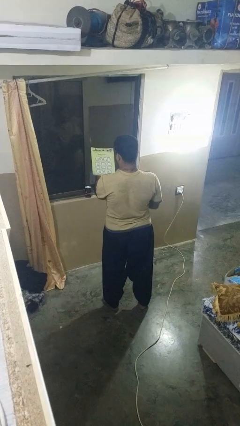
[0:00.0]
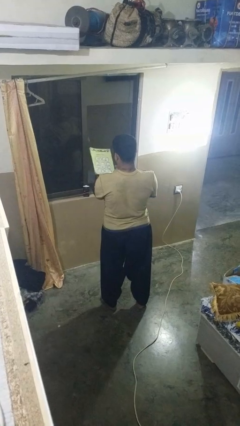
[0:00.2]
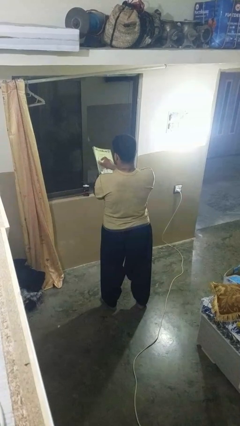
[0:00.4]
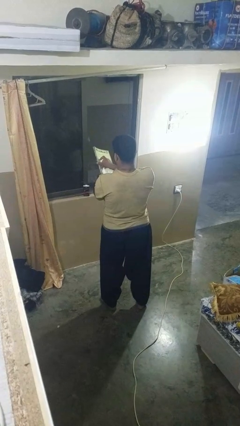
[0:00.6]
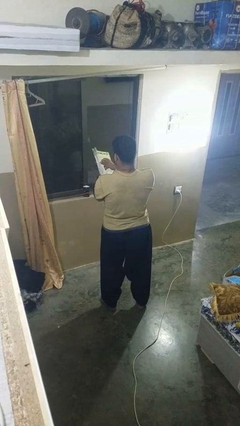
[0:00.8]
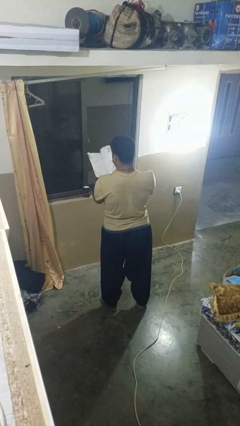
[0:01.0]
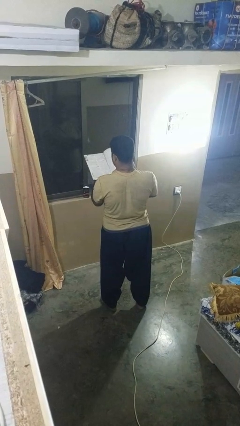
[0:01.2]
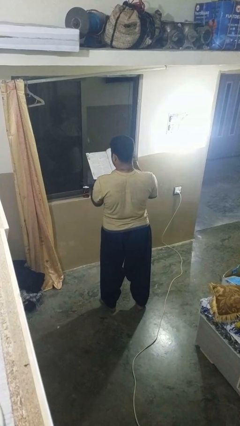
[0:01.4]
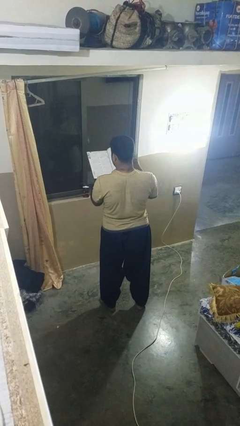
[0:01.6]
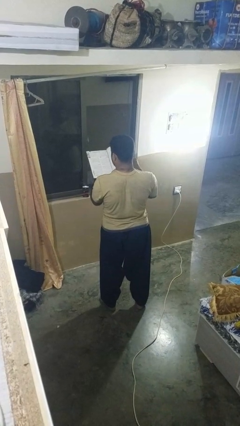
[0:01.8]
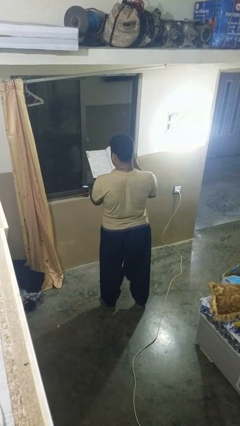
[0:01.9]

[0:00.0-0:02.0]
person reads magazine

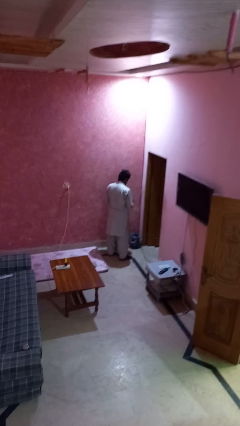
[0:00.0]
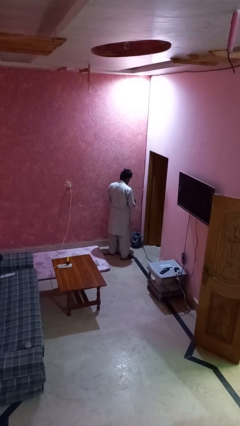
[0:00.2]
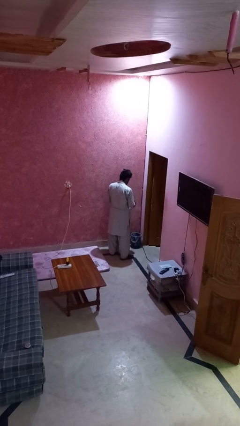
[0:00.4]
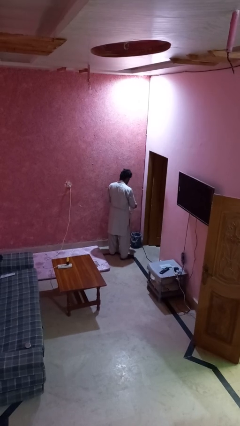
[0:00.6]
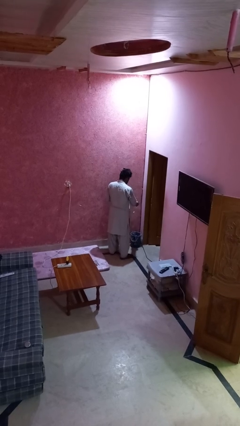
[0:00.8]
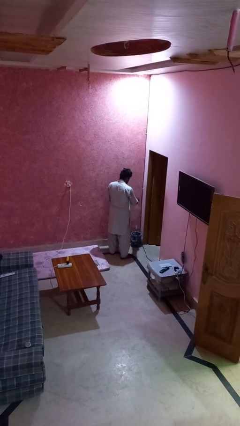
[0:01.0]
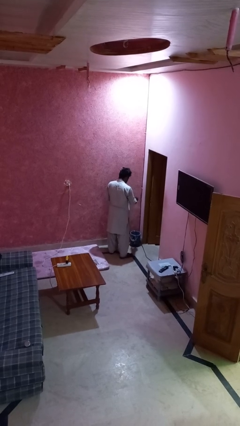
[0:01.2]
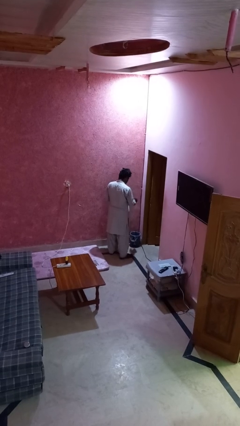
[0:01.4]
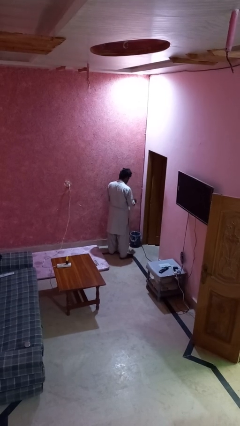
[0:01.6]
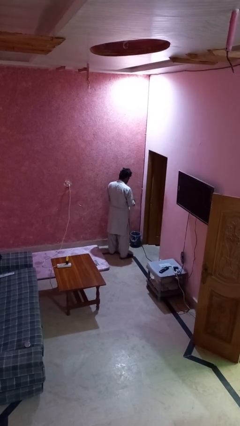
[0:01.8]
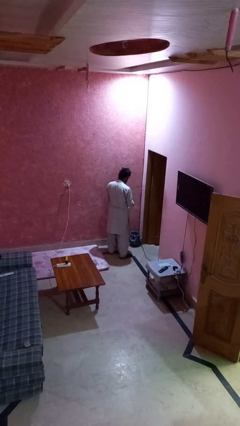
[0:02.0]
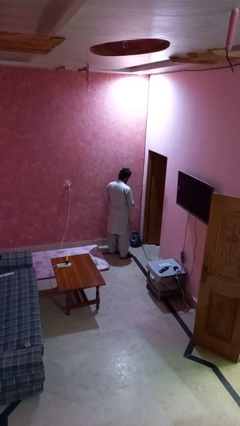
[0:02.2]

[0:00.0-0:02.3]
person discards trash

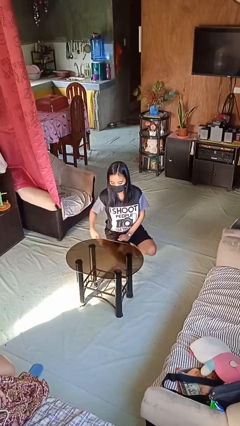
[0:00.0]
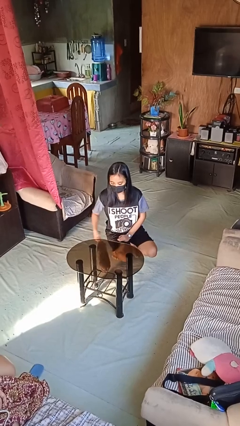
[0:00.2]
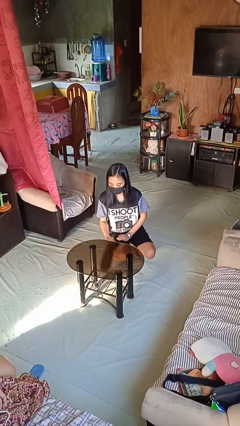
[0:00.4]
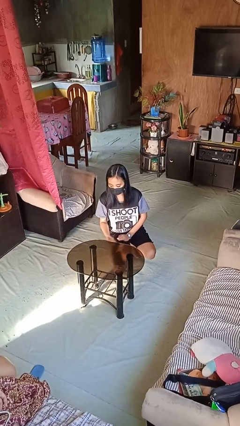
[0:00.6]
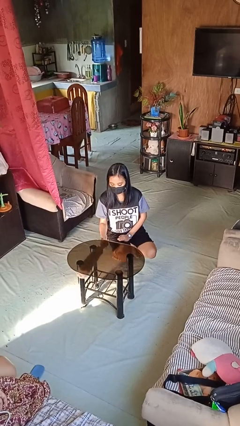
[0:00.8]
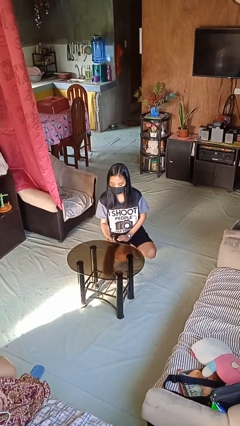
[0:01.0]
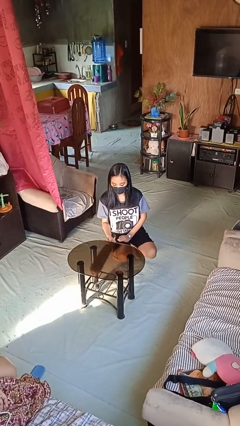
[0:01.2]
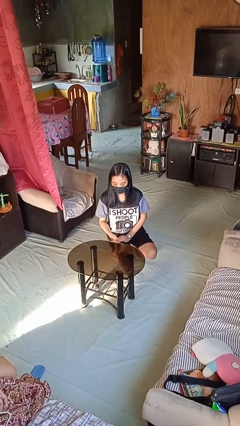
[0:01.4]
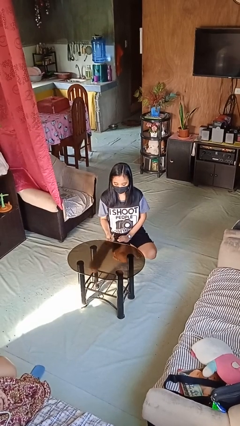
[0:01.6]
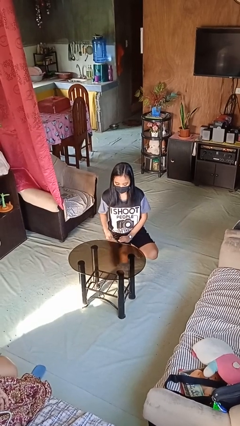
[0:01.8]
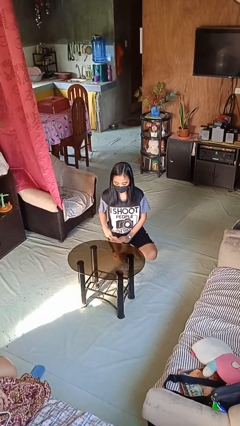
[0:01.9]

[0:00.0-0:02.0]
person dusts furniture

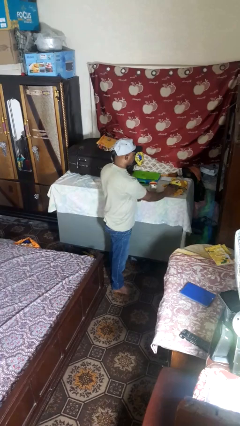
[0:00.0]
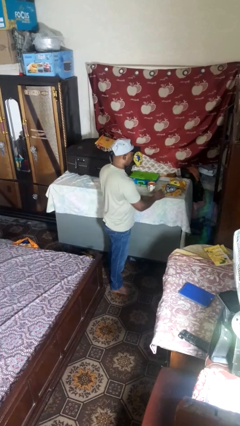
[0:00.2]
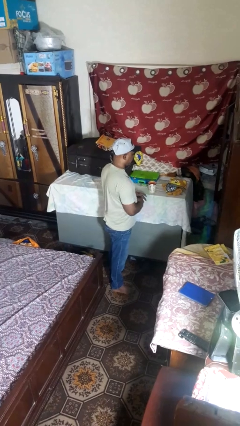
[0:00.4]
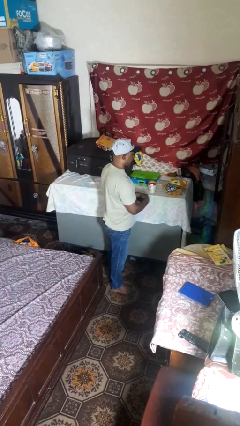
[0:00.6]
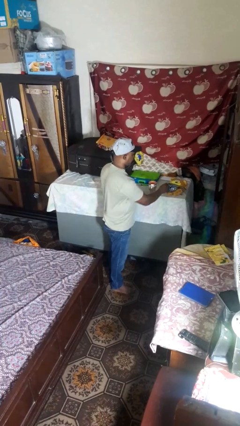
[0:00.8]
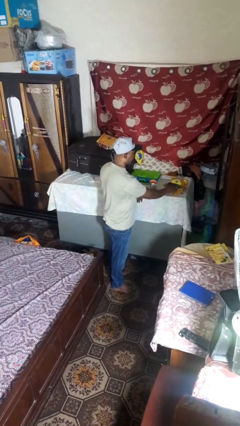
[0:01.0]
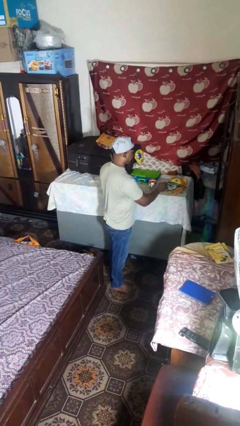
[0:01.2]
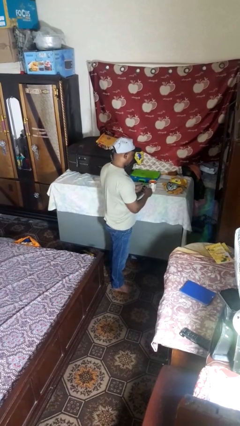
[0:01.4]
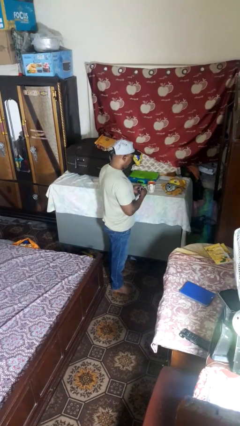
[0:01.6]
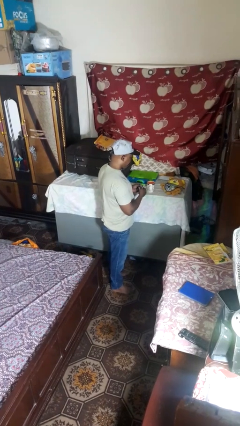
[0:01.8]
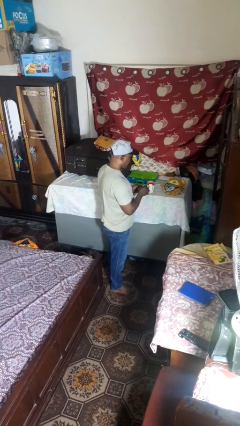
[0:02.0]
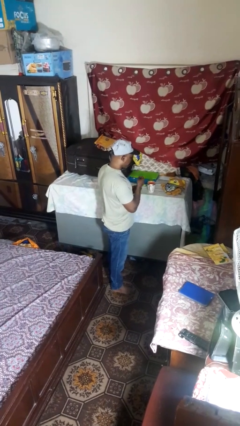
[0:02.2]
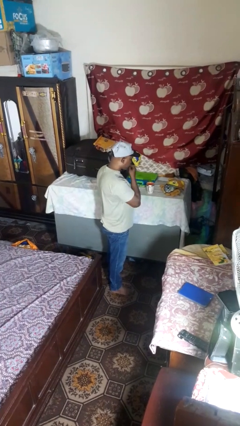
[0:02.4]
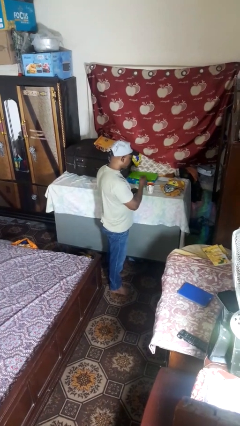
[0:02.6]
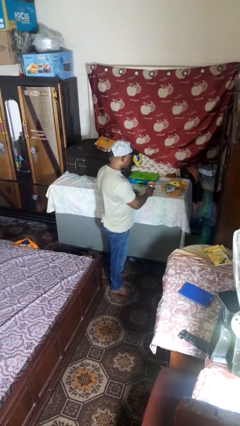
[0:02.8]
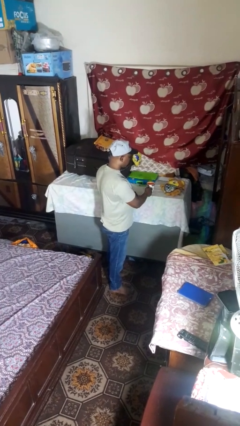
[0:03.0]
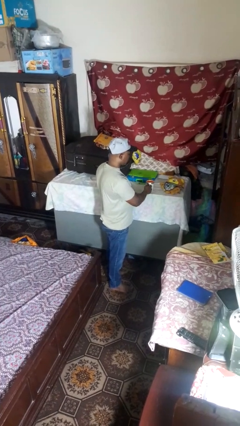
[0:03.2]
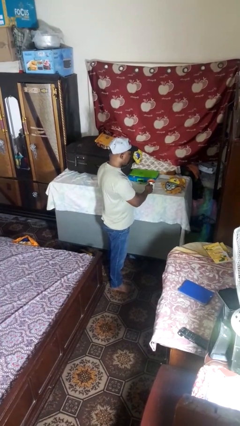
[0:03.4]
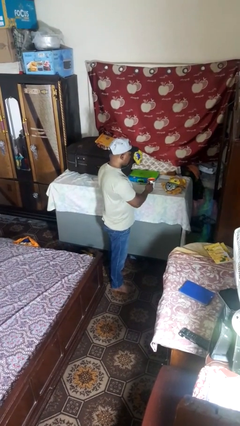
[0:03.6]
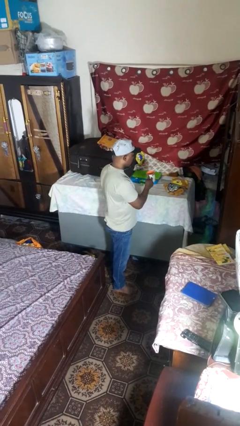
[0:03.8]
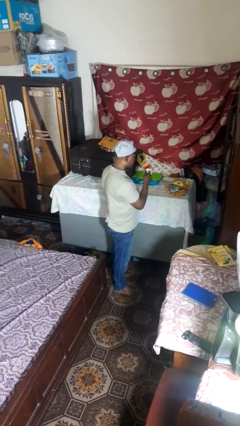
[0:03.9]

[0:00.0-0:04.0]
person takes medicine pills

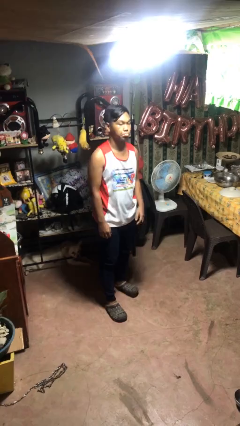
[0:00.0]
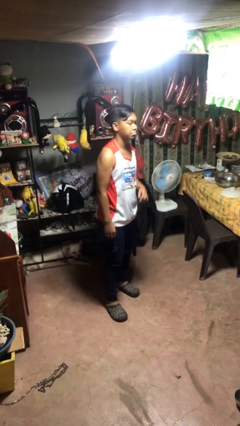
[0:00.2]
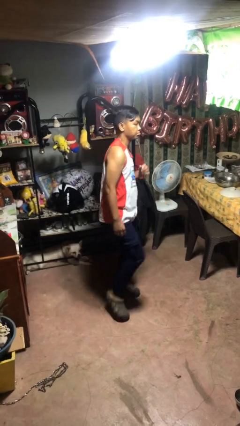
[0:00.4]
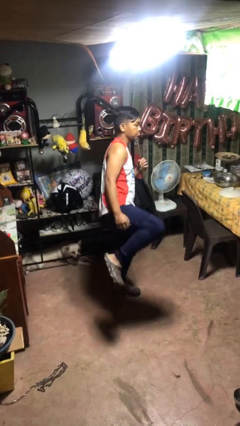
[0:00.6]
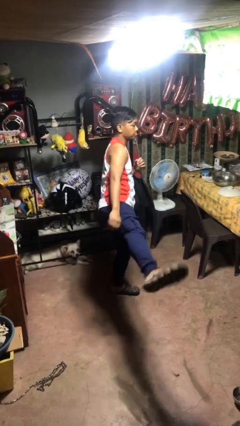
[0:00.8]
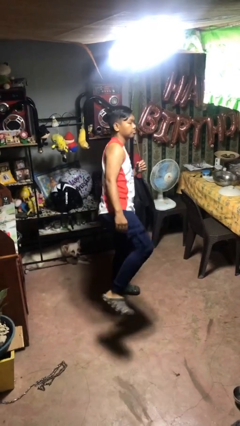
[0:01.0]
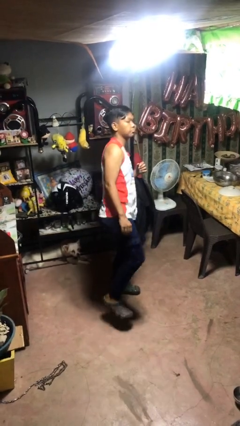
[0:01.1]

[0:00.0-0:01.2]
person karate kicks

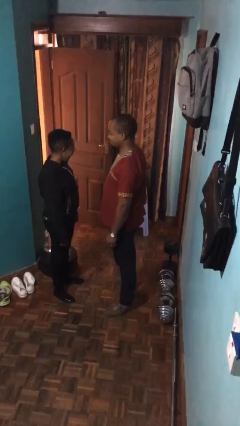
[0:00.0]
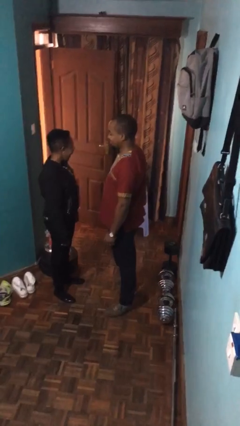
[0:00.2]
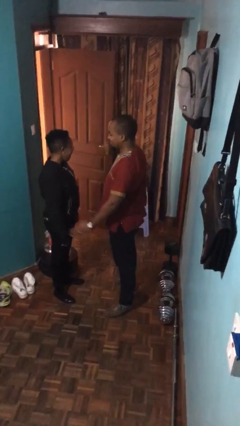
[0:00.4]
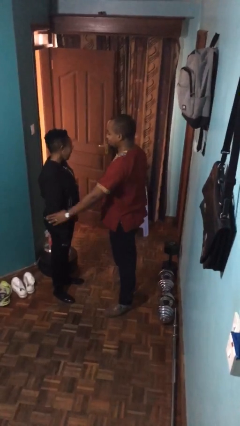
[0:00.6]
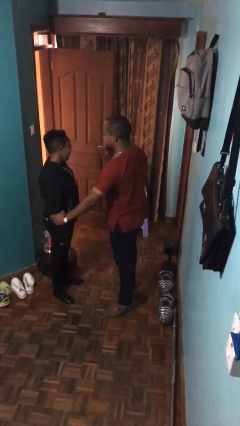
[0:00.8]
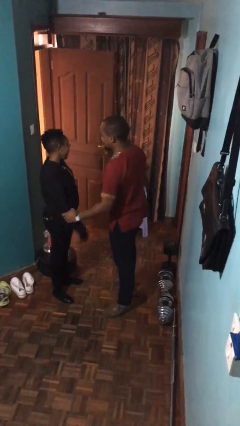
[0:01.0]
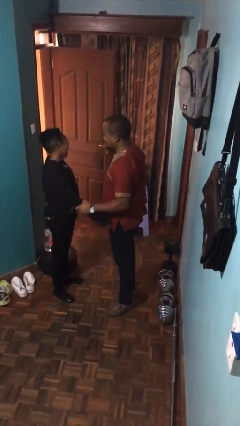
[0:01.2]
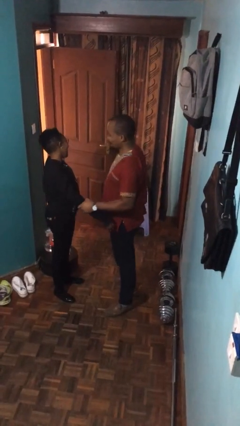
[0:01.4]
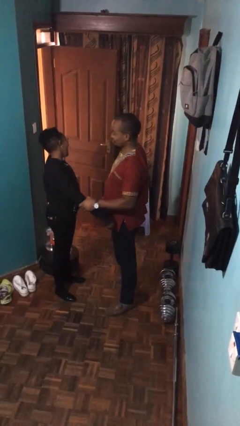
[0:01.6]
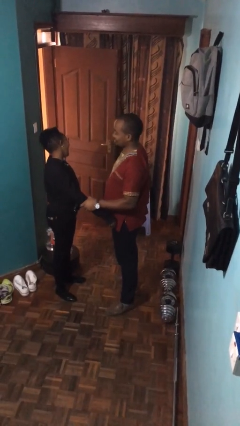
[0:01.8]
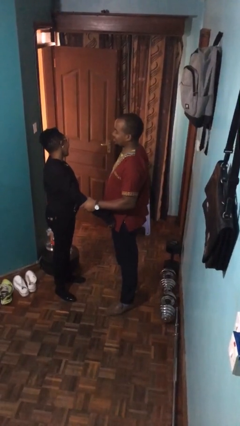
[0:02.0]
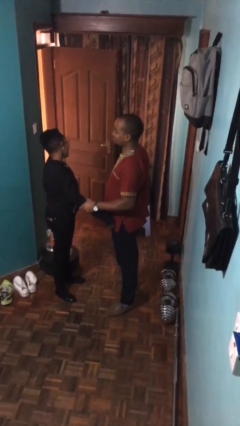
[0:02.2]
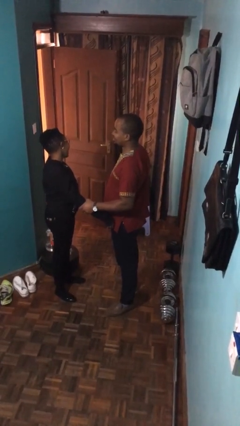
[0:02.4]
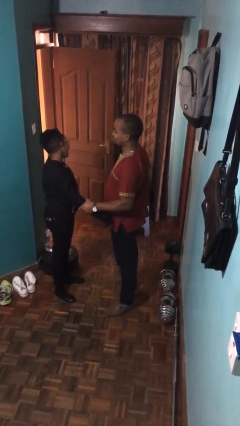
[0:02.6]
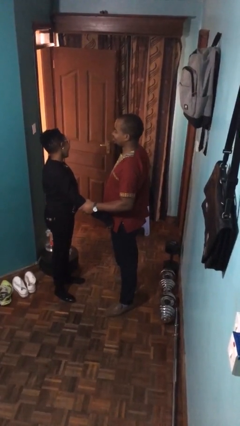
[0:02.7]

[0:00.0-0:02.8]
person grabs person by forearm

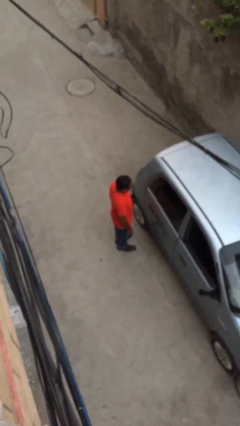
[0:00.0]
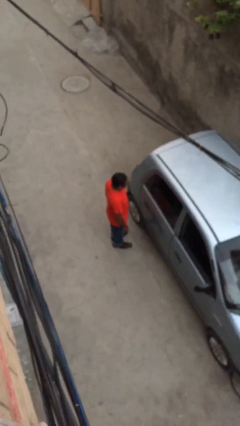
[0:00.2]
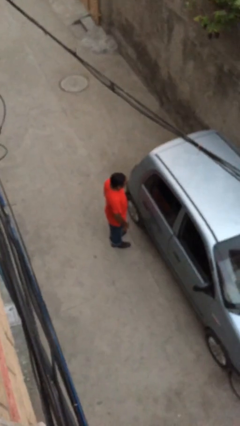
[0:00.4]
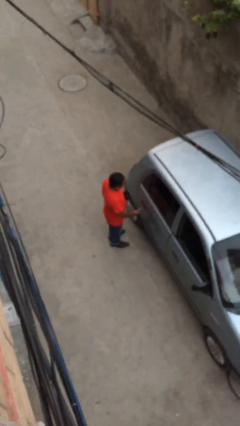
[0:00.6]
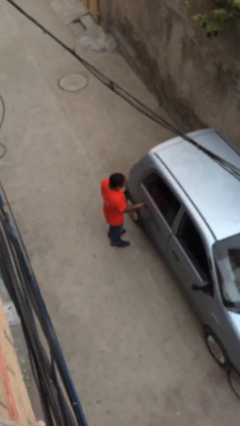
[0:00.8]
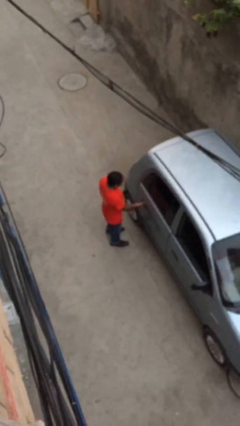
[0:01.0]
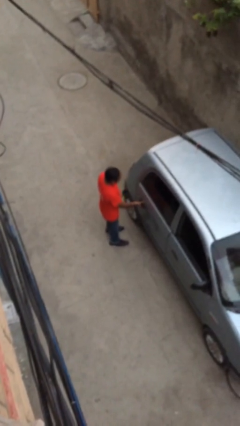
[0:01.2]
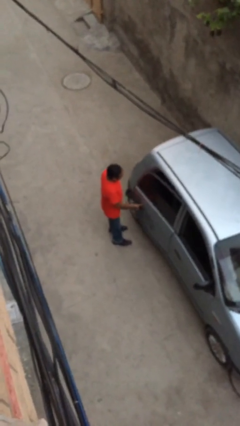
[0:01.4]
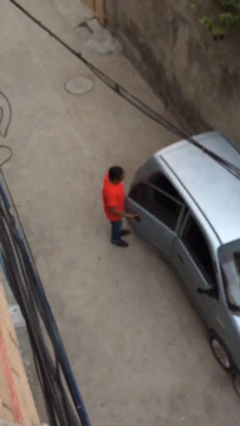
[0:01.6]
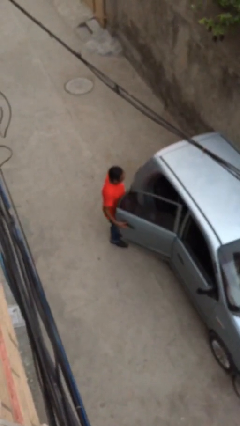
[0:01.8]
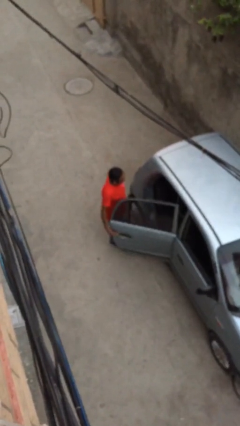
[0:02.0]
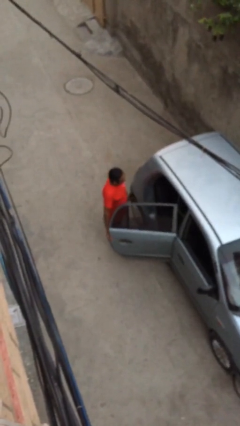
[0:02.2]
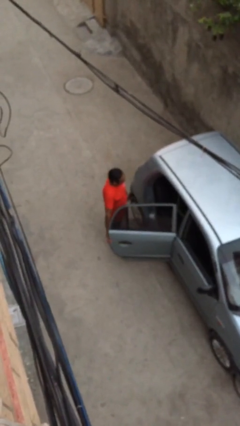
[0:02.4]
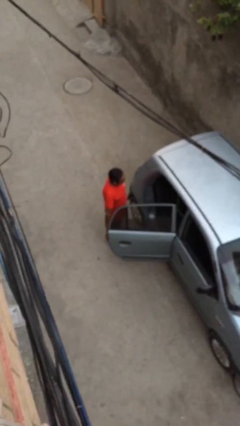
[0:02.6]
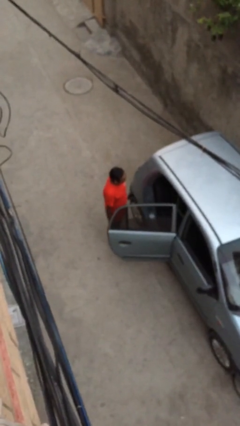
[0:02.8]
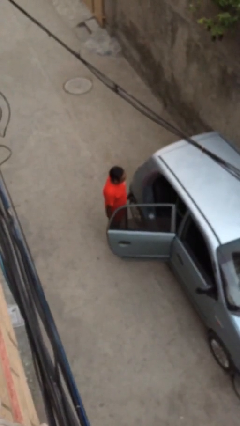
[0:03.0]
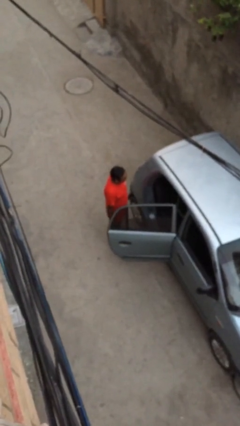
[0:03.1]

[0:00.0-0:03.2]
person opens car door
